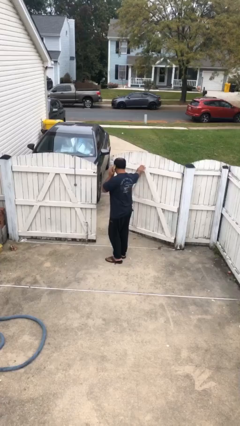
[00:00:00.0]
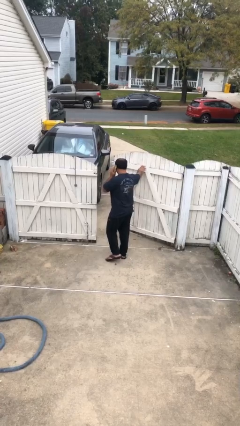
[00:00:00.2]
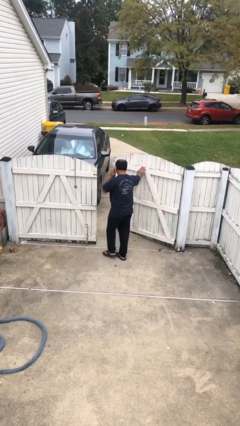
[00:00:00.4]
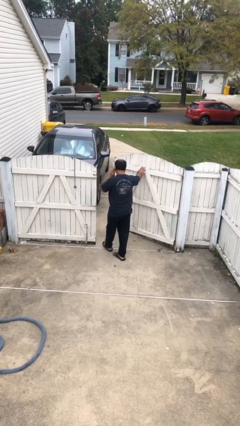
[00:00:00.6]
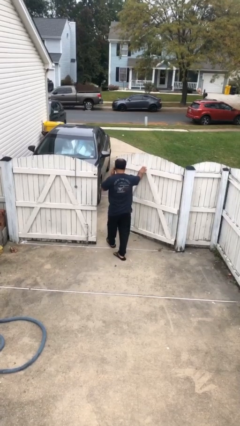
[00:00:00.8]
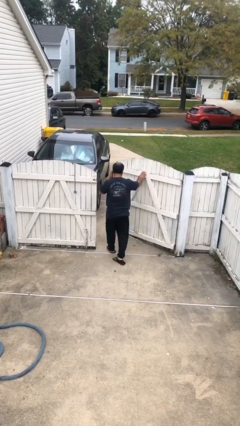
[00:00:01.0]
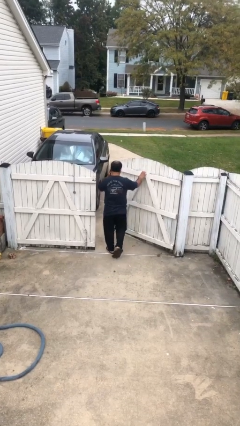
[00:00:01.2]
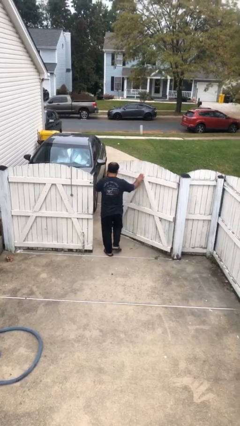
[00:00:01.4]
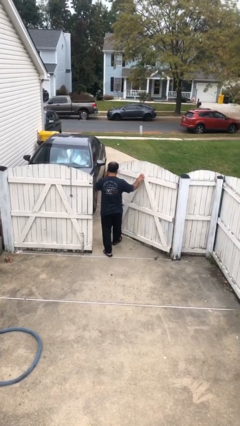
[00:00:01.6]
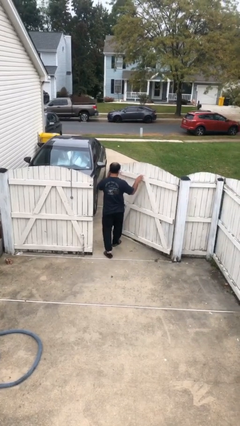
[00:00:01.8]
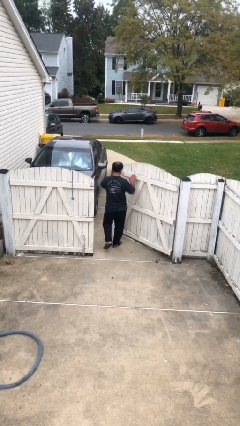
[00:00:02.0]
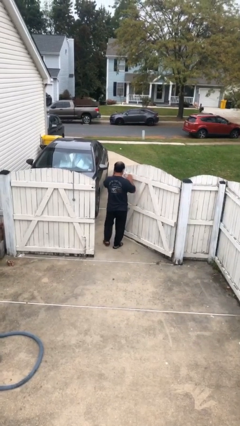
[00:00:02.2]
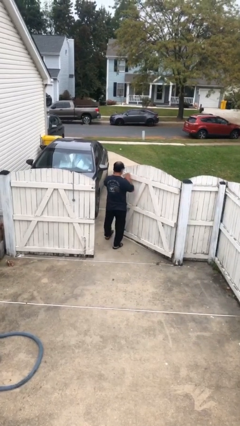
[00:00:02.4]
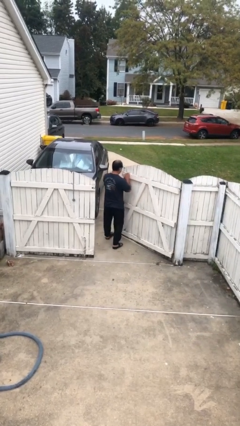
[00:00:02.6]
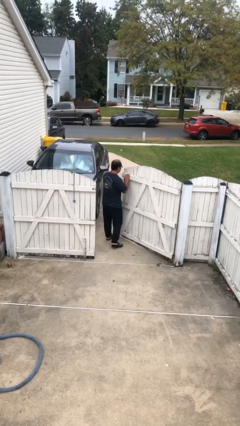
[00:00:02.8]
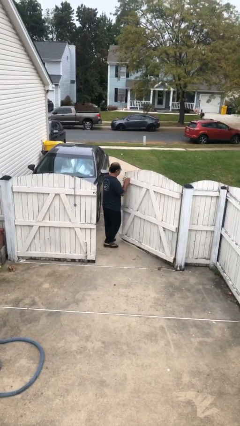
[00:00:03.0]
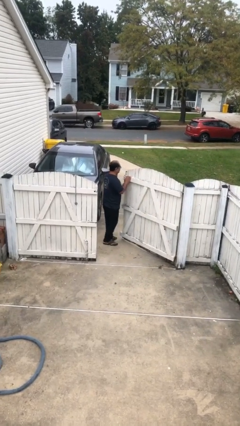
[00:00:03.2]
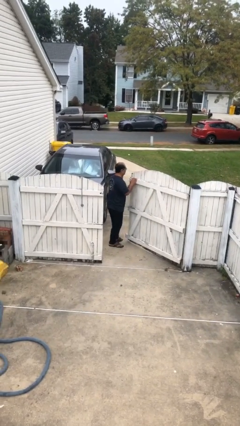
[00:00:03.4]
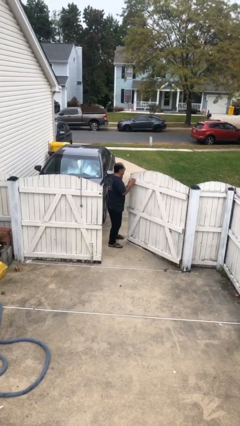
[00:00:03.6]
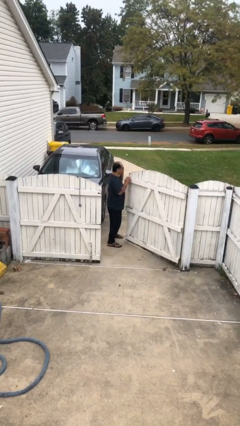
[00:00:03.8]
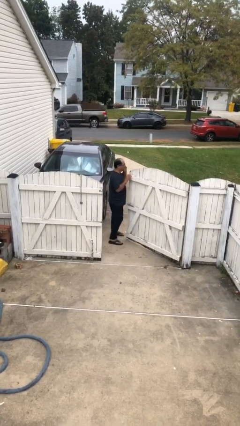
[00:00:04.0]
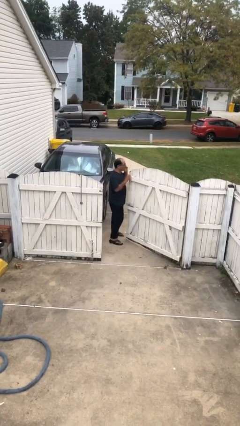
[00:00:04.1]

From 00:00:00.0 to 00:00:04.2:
person exits scene through structure

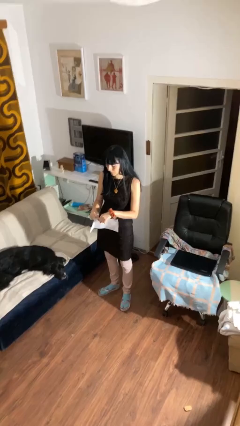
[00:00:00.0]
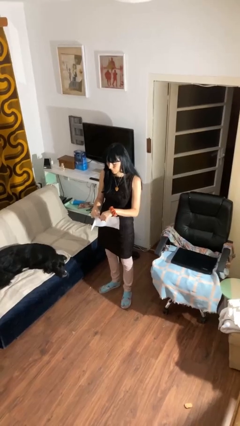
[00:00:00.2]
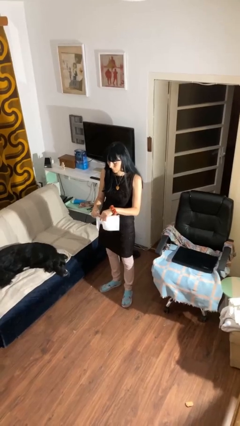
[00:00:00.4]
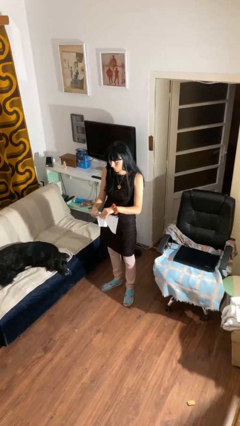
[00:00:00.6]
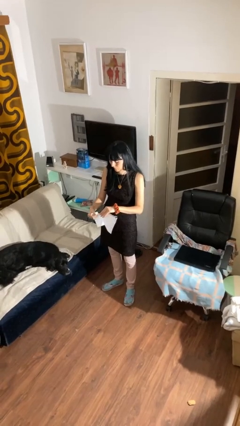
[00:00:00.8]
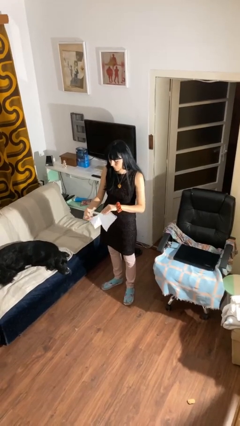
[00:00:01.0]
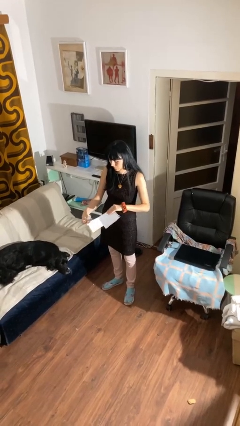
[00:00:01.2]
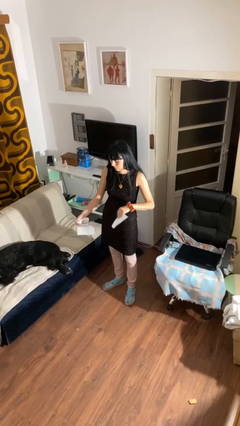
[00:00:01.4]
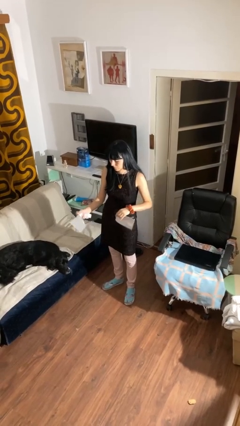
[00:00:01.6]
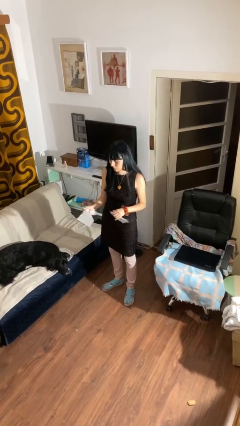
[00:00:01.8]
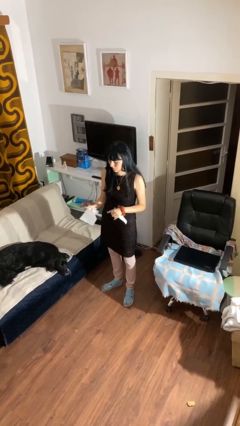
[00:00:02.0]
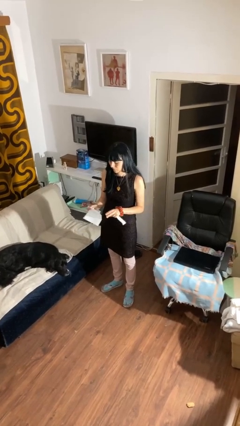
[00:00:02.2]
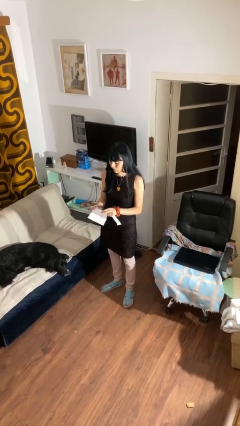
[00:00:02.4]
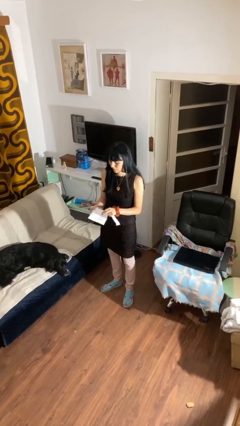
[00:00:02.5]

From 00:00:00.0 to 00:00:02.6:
person tears paper

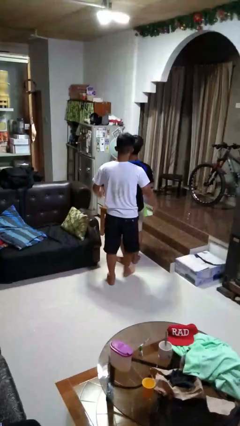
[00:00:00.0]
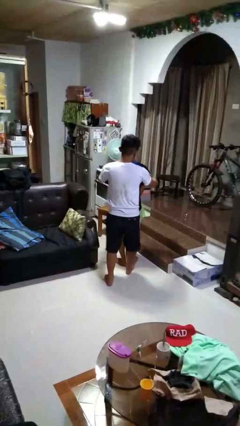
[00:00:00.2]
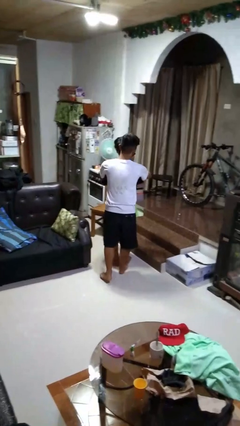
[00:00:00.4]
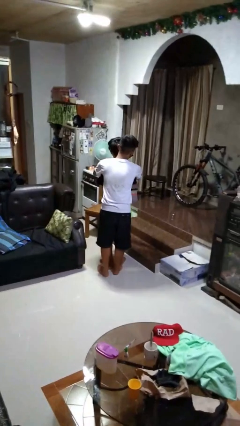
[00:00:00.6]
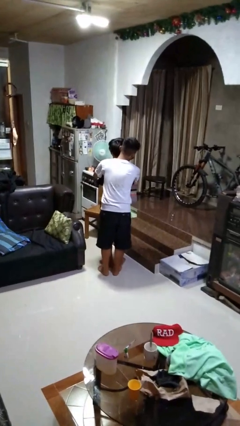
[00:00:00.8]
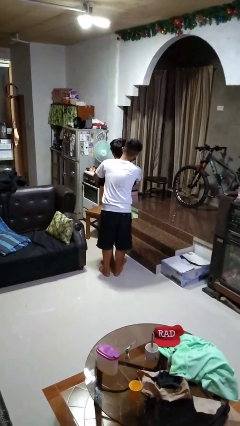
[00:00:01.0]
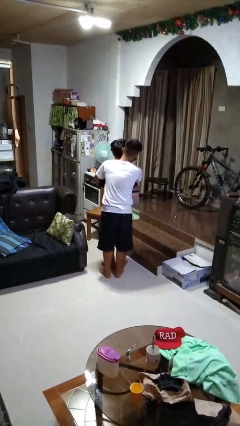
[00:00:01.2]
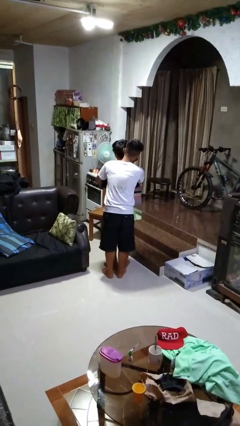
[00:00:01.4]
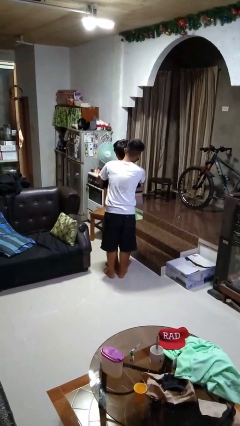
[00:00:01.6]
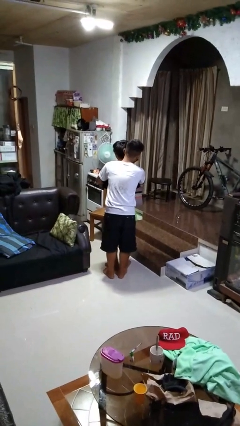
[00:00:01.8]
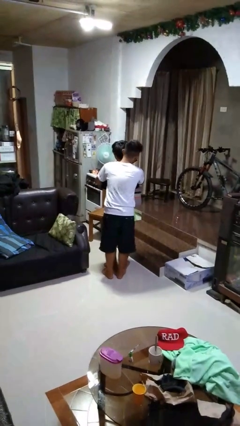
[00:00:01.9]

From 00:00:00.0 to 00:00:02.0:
person hugs person from behind

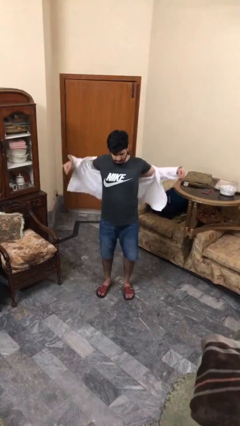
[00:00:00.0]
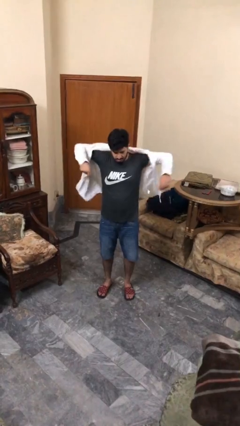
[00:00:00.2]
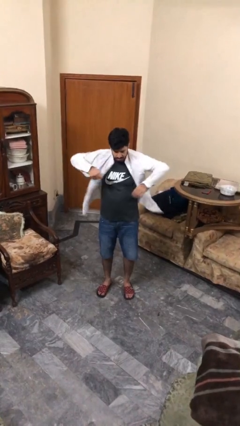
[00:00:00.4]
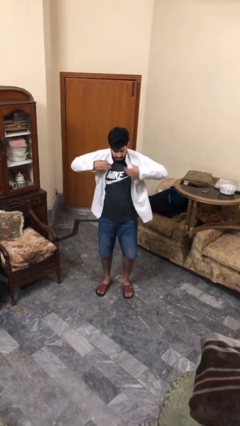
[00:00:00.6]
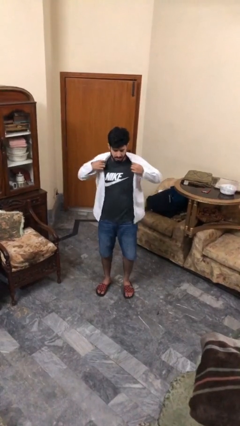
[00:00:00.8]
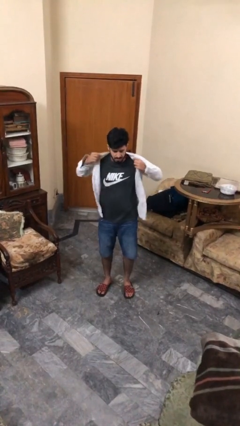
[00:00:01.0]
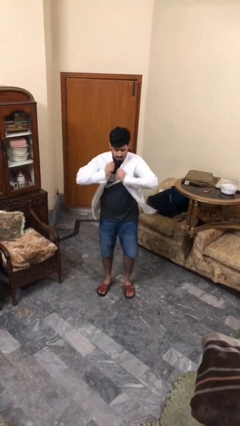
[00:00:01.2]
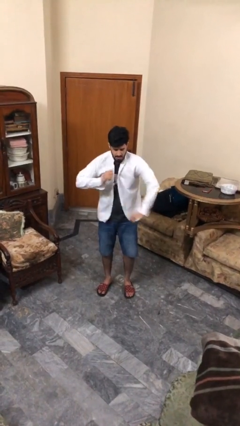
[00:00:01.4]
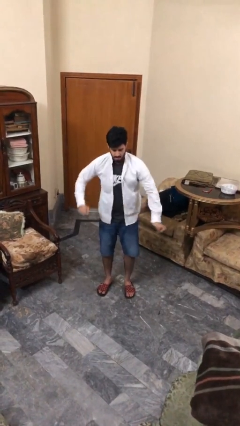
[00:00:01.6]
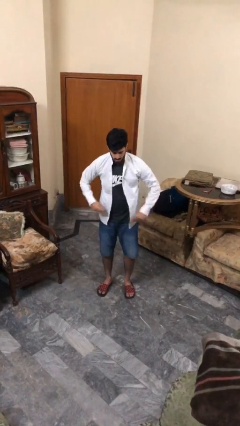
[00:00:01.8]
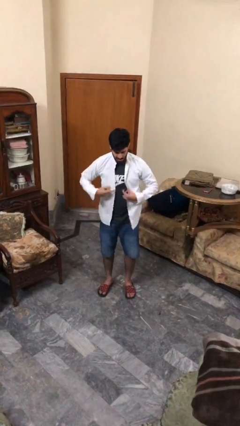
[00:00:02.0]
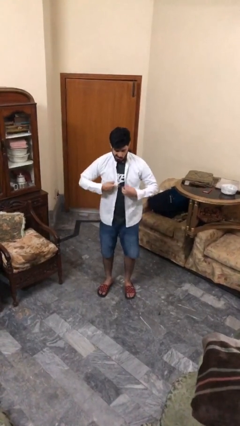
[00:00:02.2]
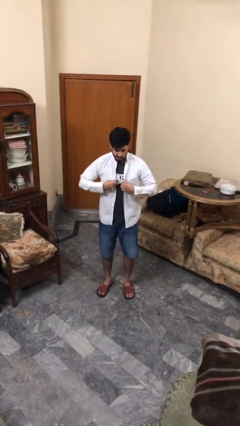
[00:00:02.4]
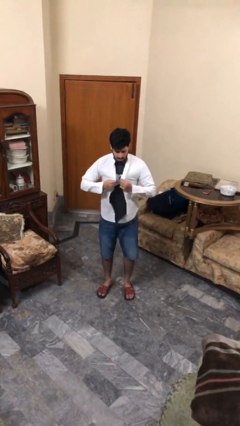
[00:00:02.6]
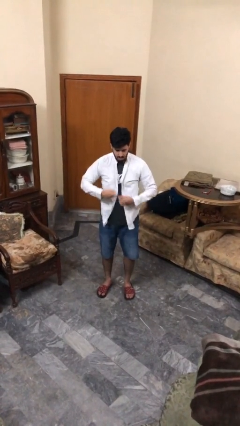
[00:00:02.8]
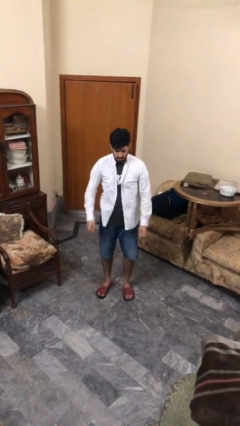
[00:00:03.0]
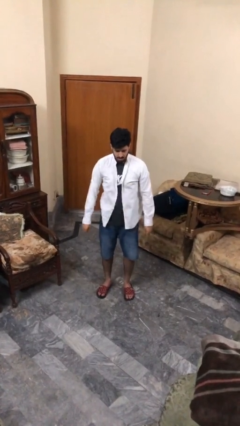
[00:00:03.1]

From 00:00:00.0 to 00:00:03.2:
person puts on shirt

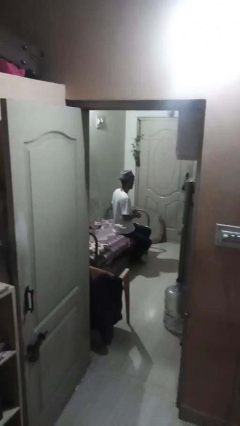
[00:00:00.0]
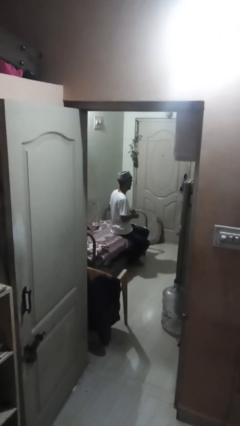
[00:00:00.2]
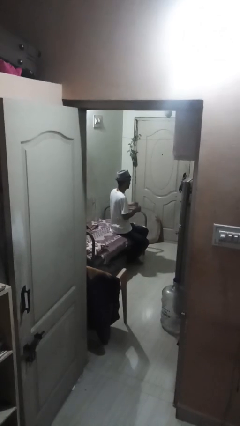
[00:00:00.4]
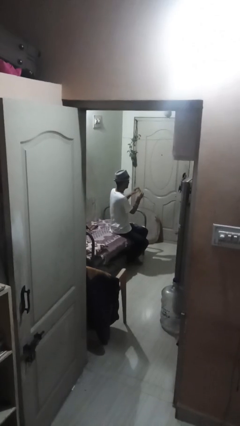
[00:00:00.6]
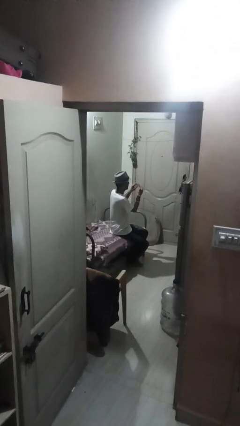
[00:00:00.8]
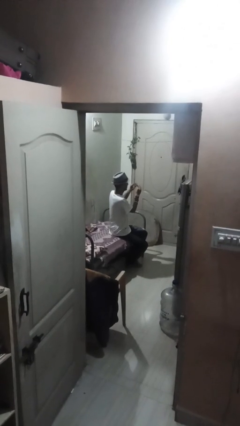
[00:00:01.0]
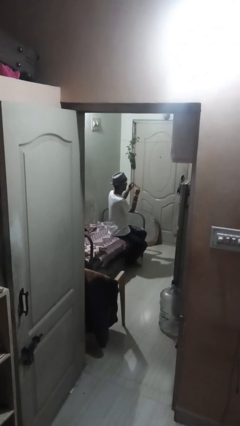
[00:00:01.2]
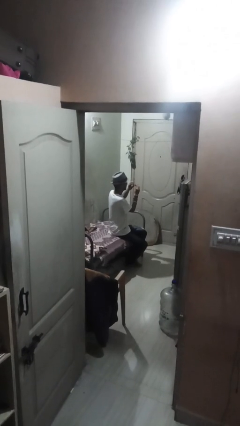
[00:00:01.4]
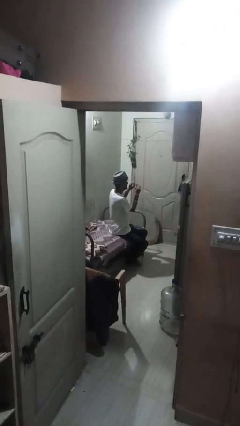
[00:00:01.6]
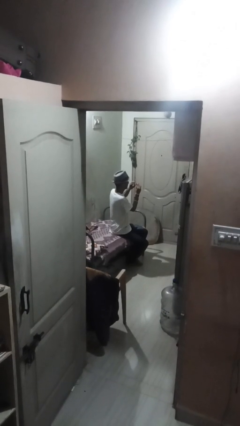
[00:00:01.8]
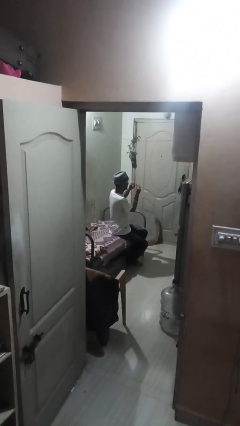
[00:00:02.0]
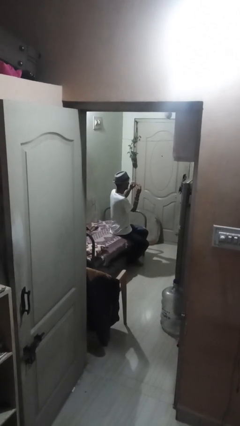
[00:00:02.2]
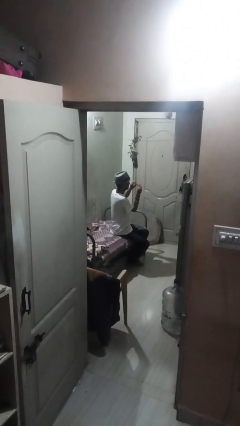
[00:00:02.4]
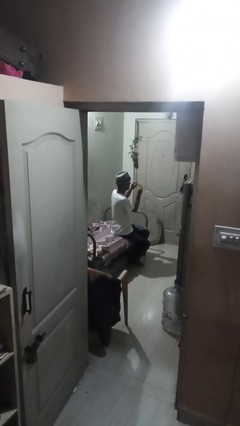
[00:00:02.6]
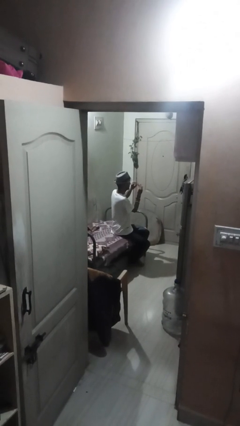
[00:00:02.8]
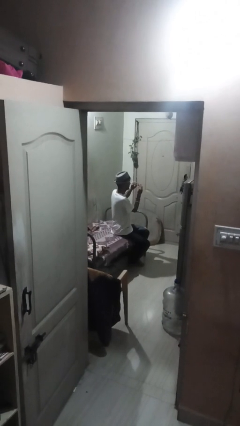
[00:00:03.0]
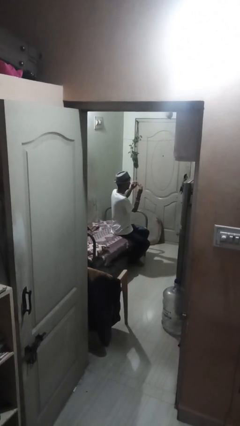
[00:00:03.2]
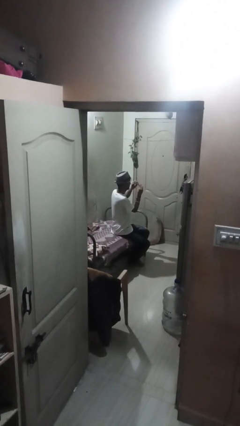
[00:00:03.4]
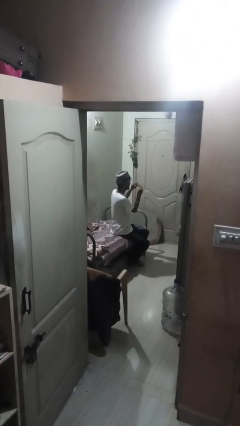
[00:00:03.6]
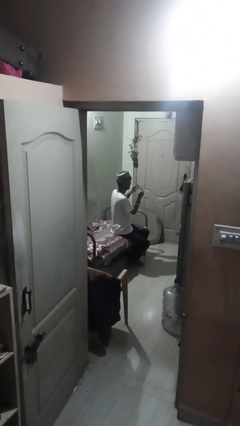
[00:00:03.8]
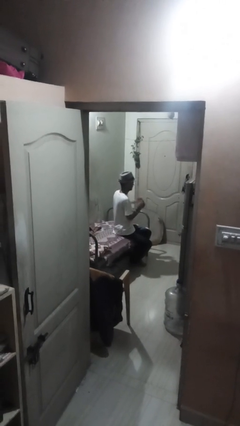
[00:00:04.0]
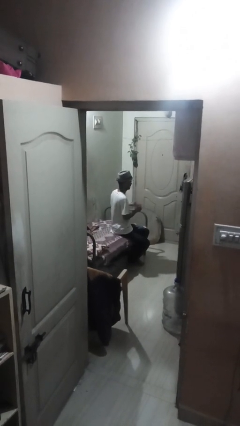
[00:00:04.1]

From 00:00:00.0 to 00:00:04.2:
person files fingernails

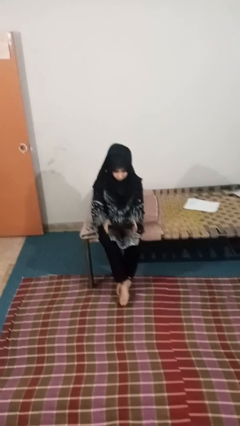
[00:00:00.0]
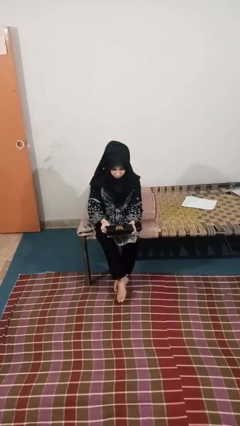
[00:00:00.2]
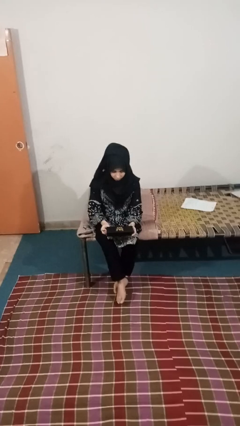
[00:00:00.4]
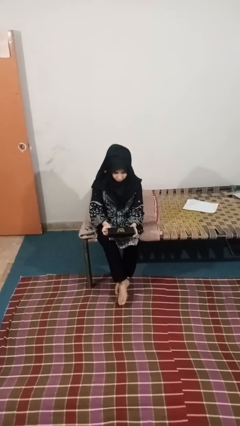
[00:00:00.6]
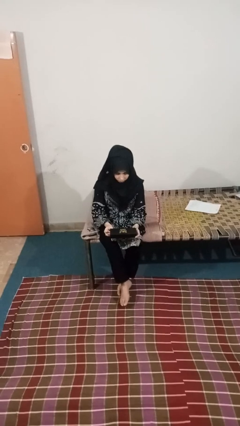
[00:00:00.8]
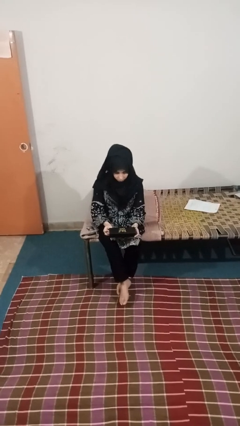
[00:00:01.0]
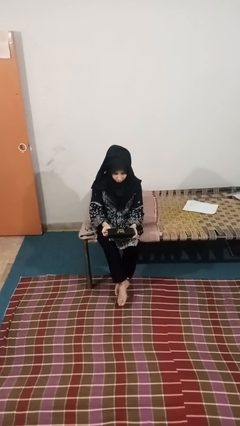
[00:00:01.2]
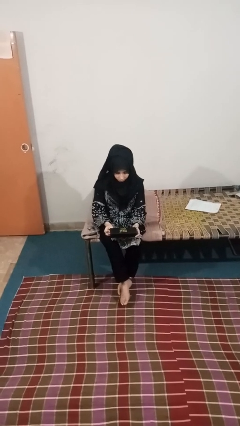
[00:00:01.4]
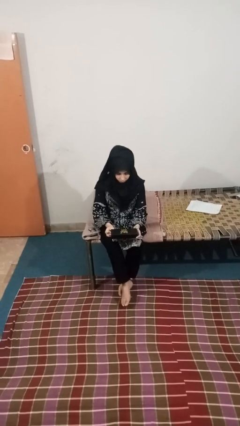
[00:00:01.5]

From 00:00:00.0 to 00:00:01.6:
person closes jewelry box
